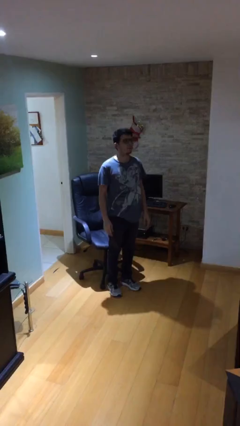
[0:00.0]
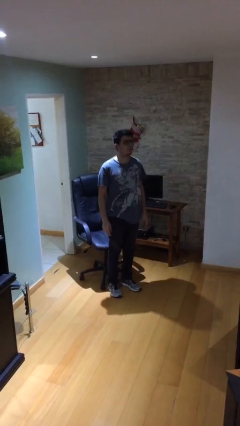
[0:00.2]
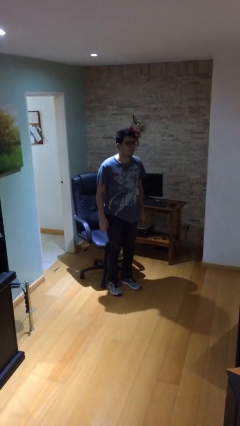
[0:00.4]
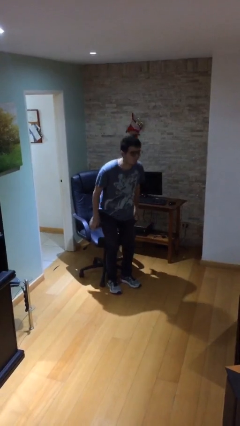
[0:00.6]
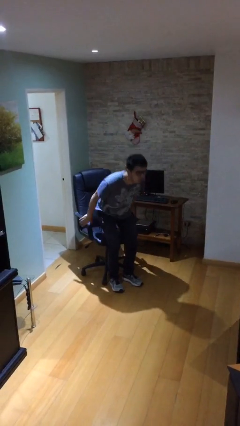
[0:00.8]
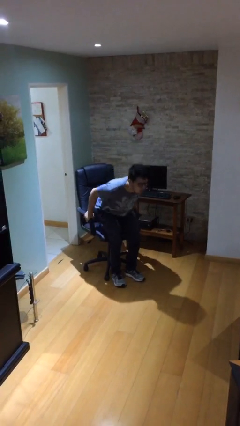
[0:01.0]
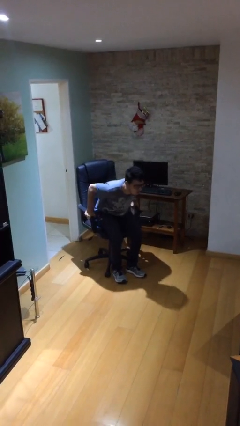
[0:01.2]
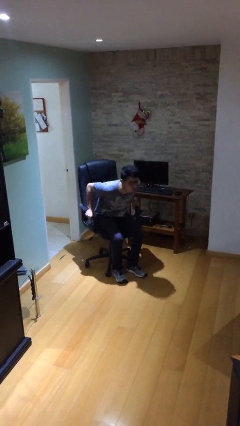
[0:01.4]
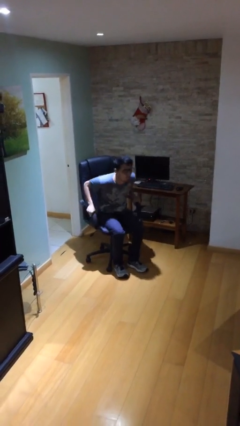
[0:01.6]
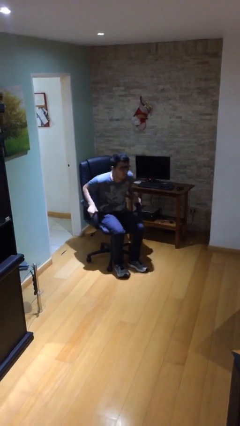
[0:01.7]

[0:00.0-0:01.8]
person sits down

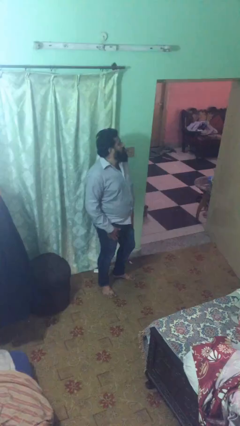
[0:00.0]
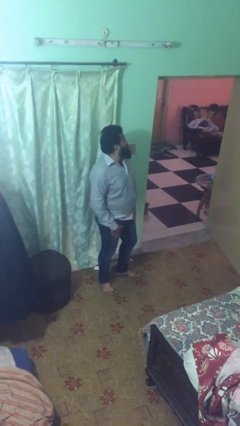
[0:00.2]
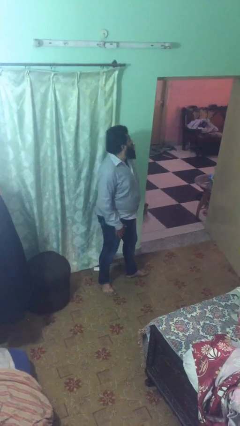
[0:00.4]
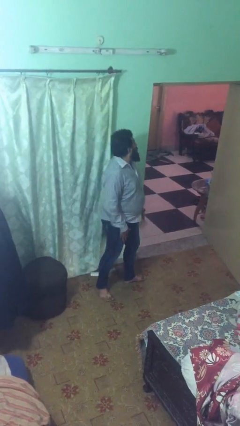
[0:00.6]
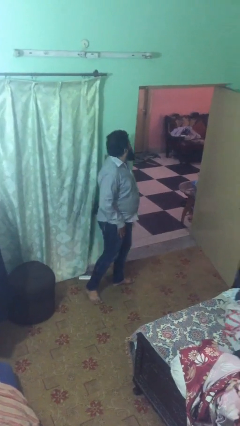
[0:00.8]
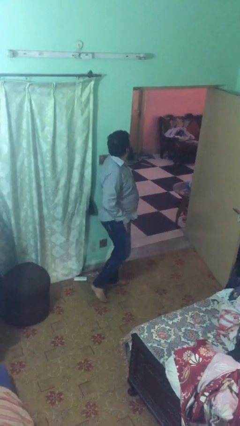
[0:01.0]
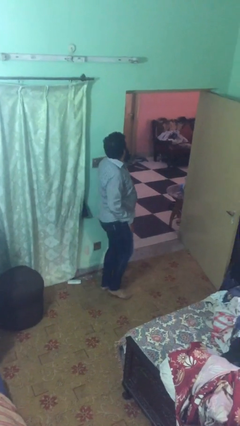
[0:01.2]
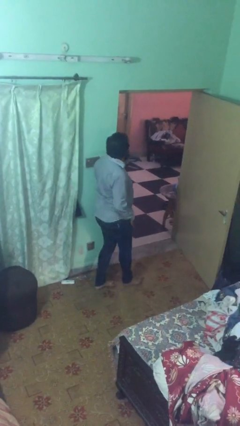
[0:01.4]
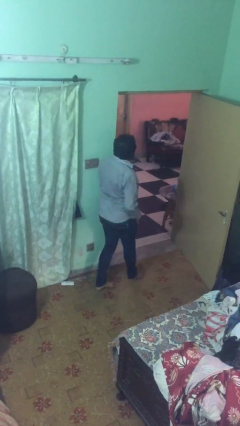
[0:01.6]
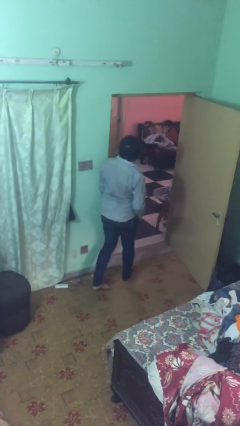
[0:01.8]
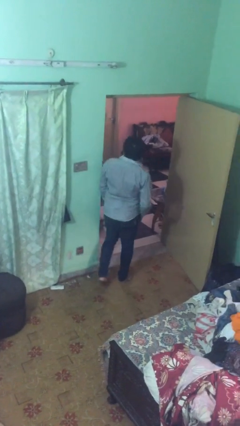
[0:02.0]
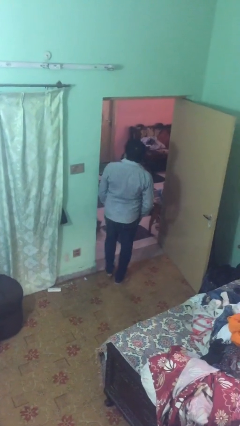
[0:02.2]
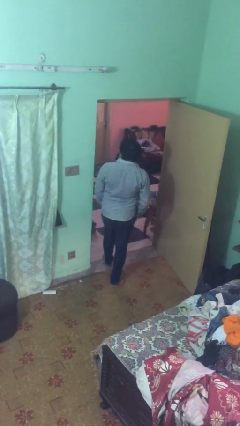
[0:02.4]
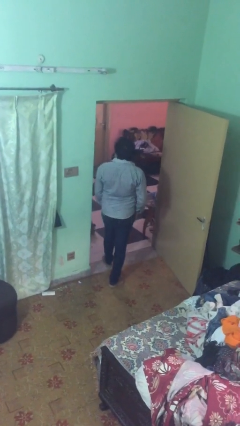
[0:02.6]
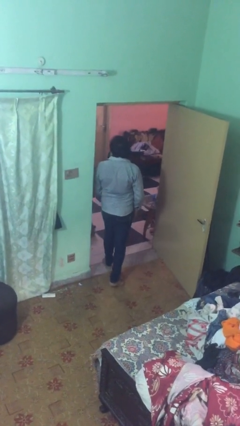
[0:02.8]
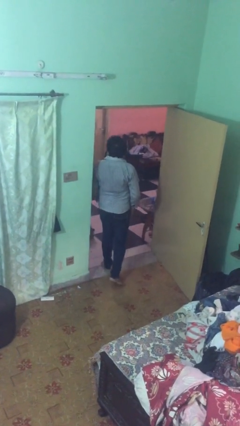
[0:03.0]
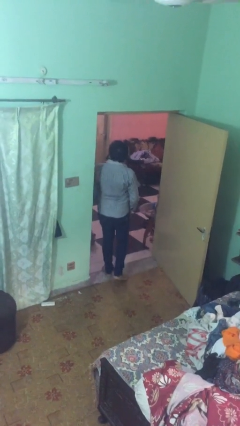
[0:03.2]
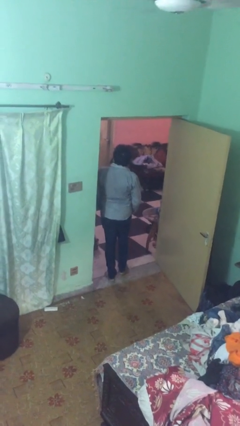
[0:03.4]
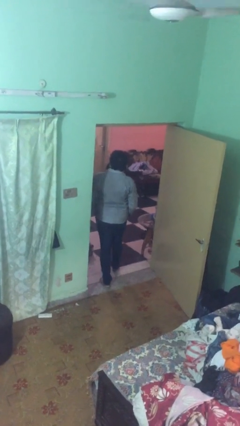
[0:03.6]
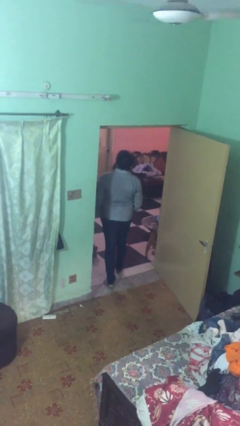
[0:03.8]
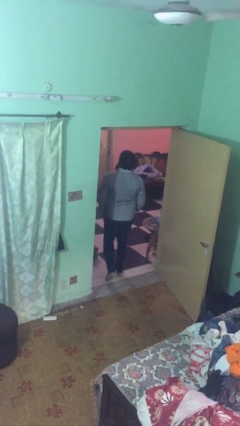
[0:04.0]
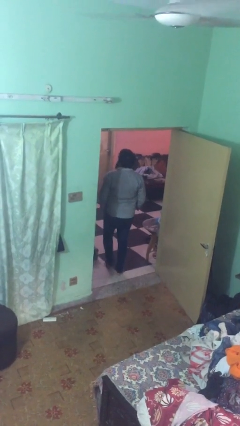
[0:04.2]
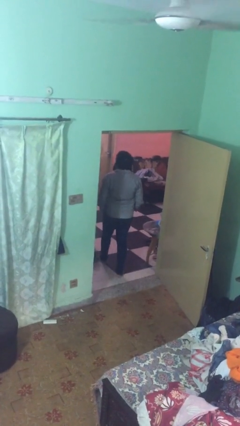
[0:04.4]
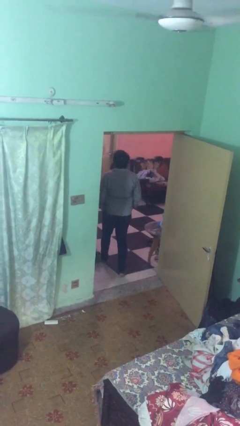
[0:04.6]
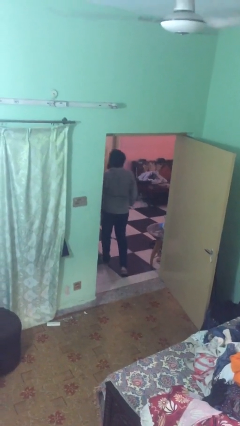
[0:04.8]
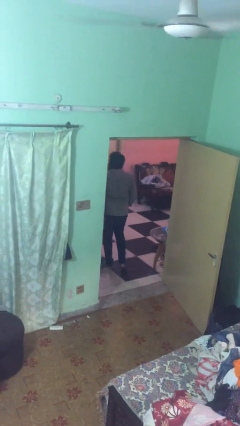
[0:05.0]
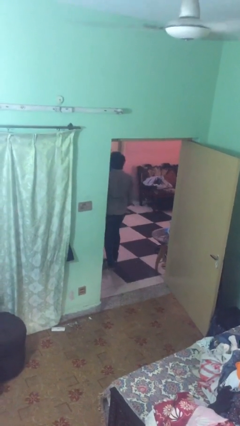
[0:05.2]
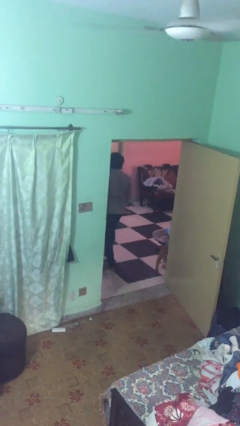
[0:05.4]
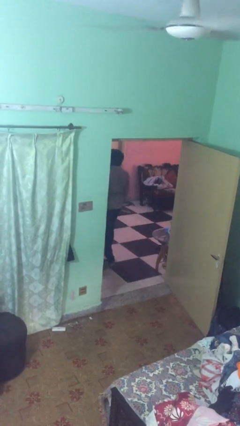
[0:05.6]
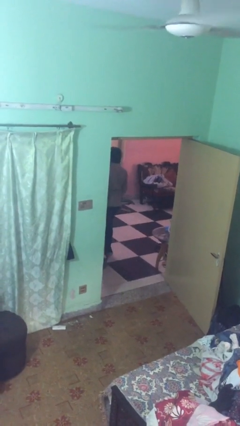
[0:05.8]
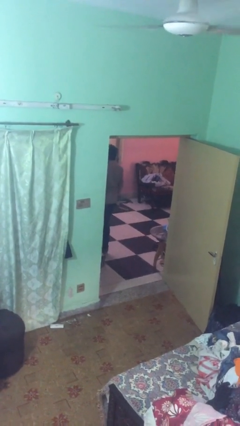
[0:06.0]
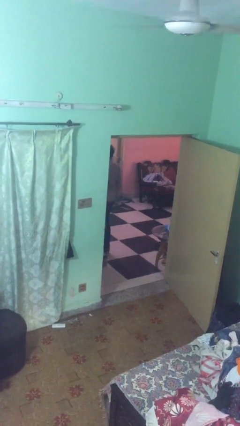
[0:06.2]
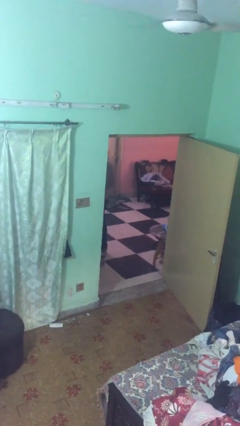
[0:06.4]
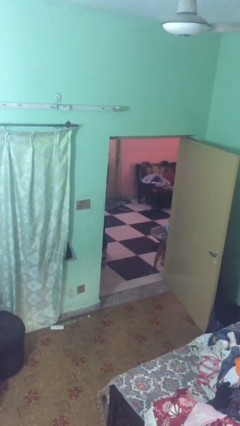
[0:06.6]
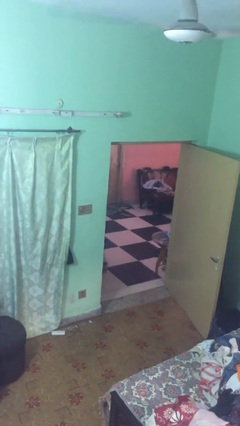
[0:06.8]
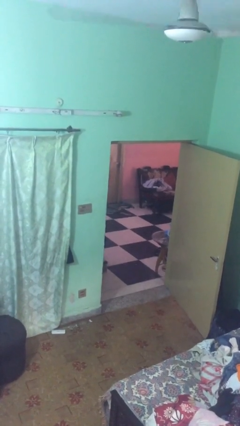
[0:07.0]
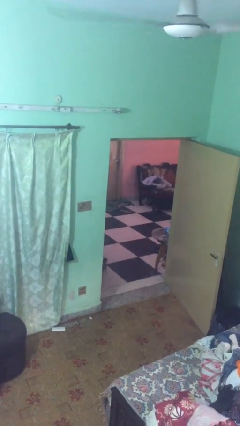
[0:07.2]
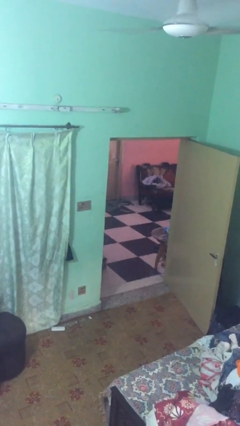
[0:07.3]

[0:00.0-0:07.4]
person exits scene through structure

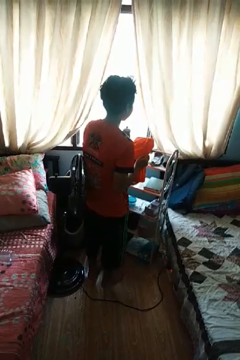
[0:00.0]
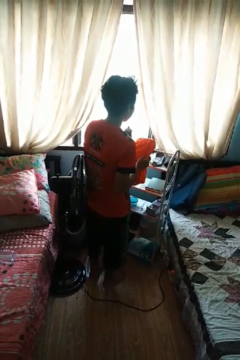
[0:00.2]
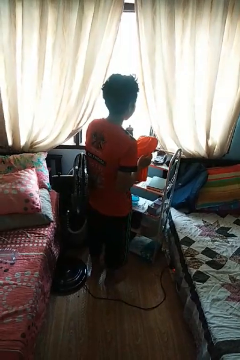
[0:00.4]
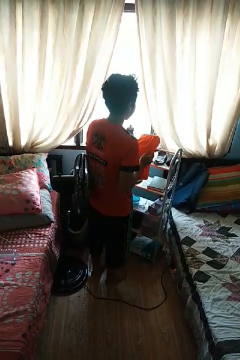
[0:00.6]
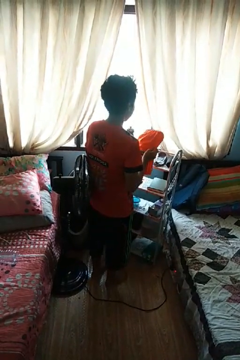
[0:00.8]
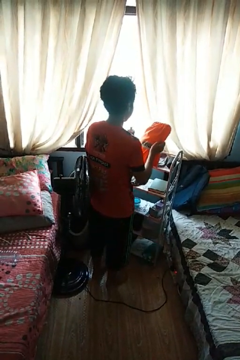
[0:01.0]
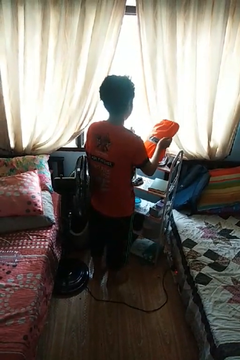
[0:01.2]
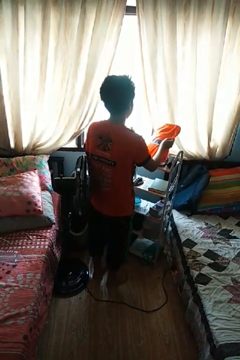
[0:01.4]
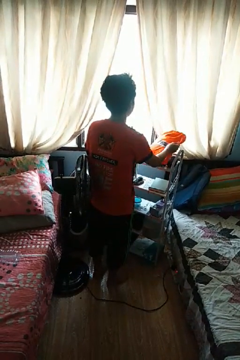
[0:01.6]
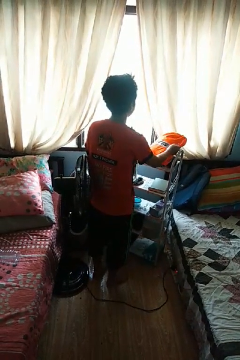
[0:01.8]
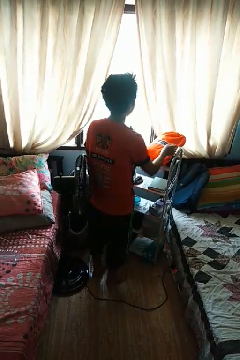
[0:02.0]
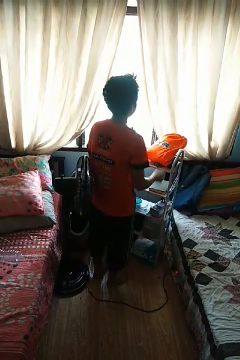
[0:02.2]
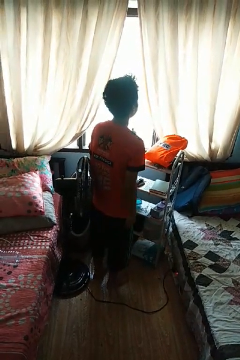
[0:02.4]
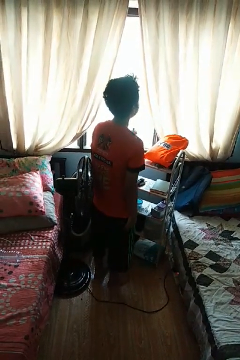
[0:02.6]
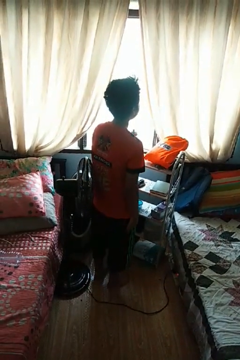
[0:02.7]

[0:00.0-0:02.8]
person puts down object on countertop

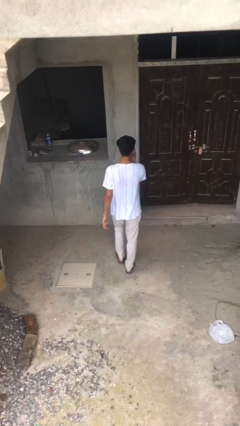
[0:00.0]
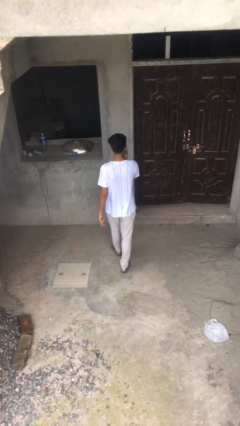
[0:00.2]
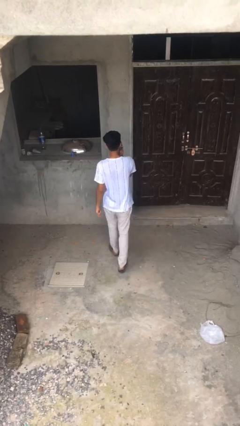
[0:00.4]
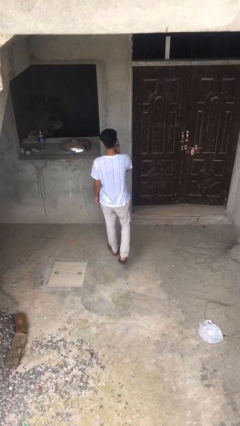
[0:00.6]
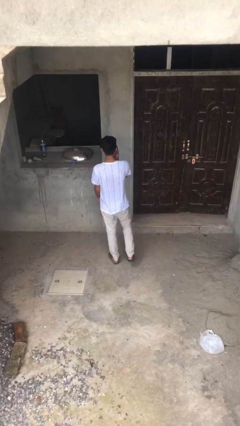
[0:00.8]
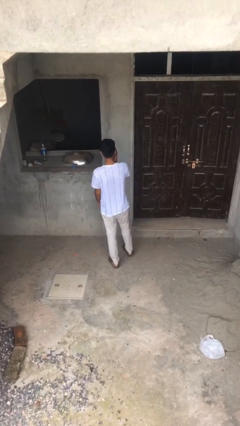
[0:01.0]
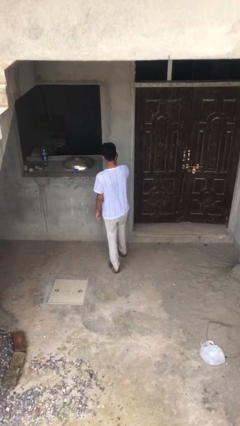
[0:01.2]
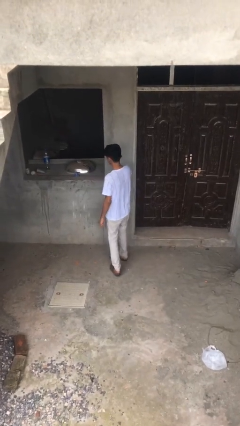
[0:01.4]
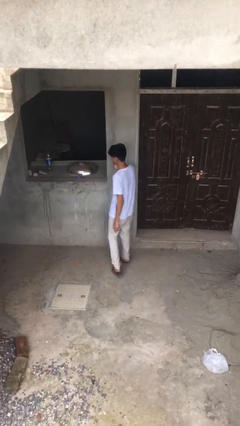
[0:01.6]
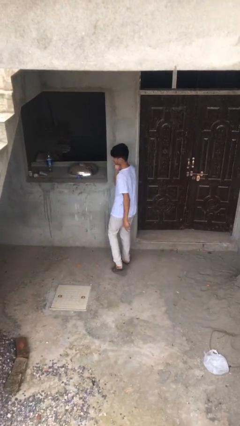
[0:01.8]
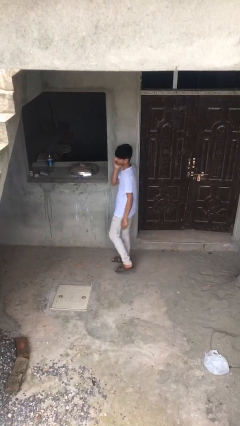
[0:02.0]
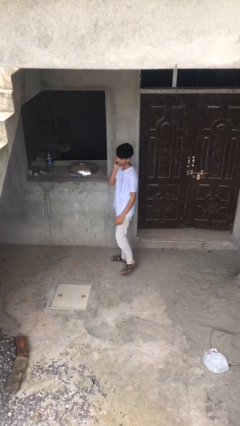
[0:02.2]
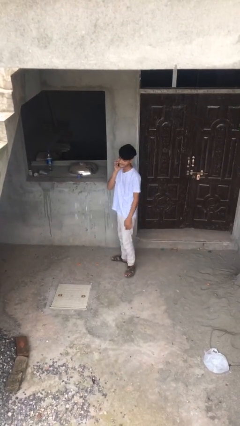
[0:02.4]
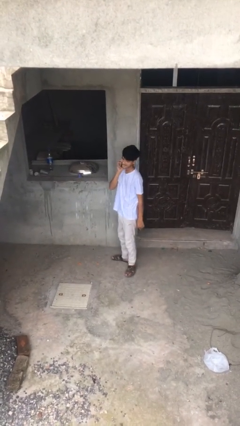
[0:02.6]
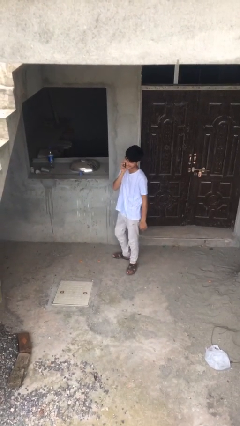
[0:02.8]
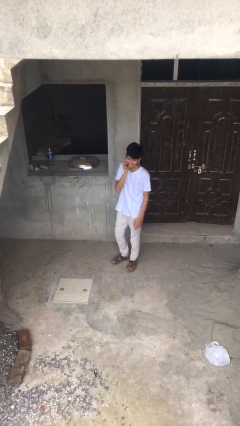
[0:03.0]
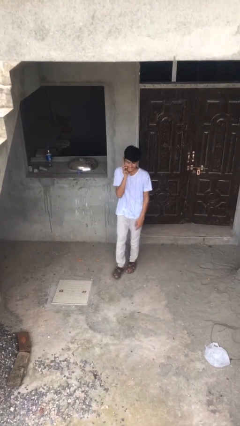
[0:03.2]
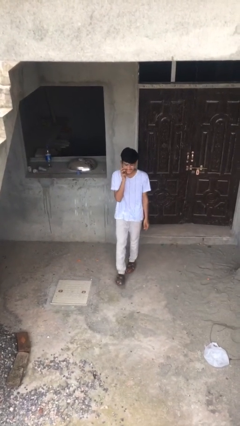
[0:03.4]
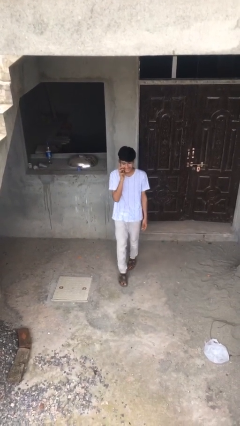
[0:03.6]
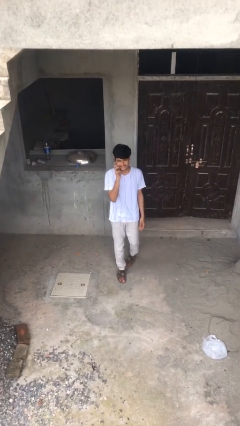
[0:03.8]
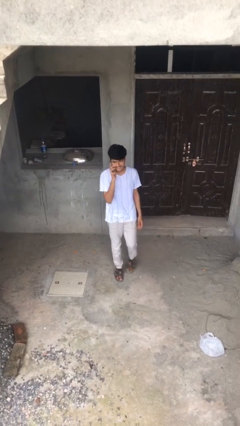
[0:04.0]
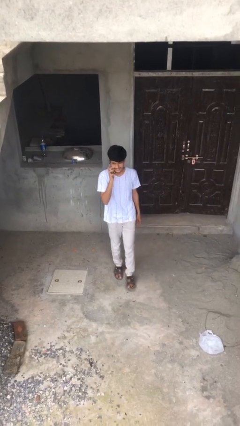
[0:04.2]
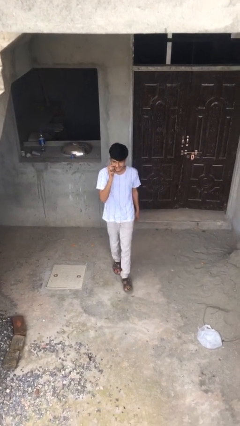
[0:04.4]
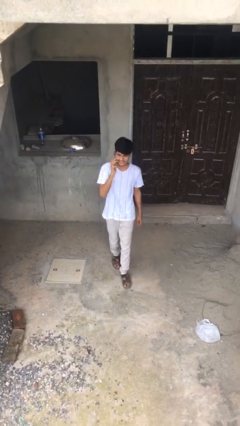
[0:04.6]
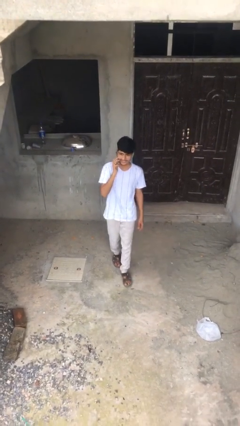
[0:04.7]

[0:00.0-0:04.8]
person talks on phone

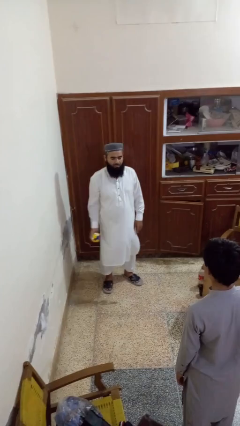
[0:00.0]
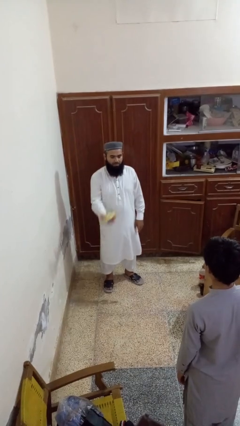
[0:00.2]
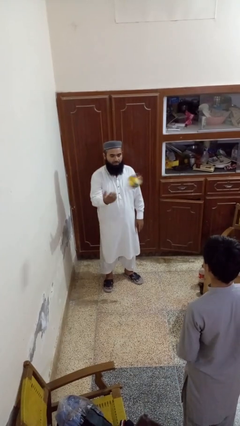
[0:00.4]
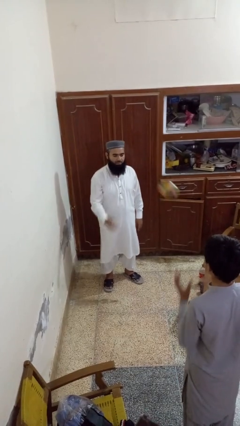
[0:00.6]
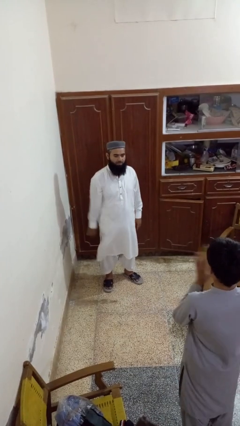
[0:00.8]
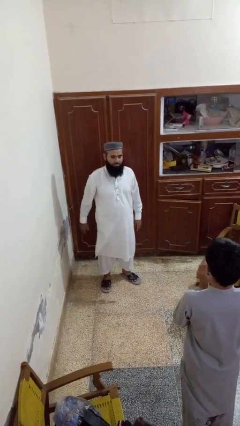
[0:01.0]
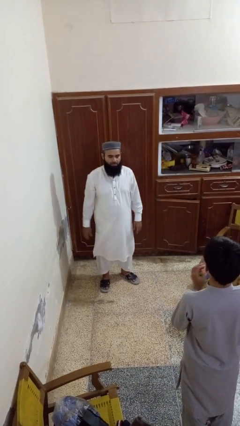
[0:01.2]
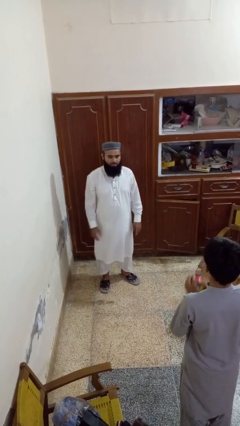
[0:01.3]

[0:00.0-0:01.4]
person throws object to person
